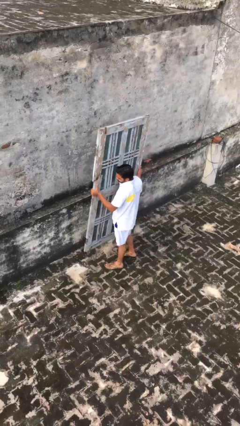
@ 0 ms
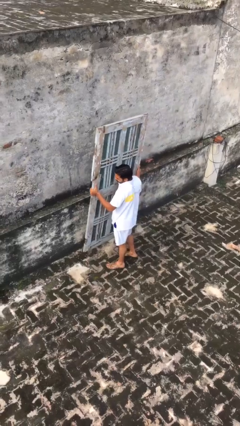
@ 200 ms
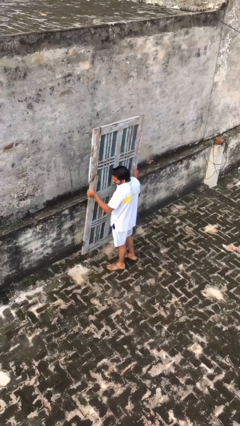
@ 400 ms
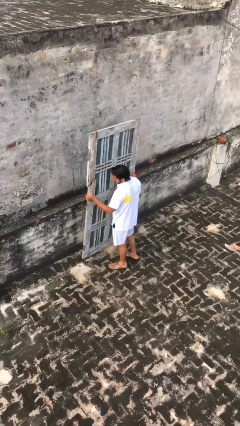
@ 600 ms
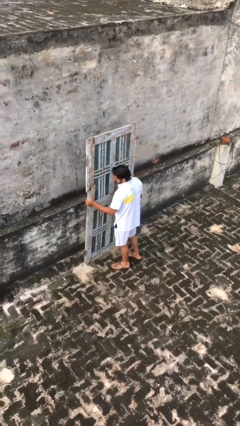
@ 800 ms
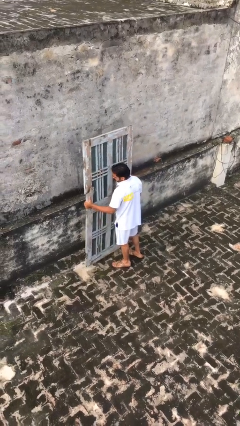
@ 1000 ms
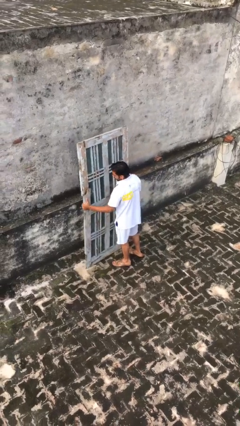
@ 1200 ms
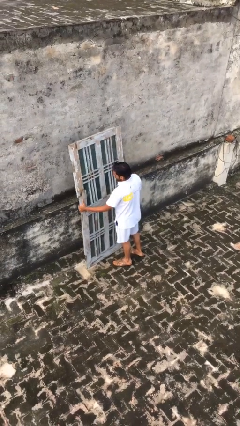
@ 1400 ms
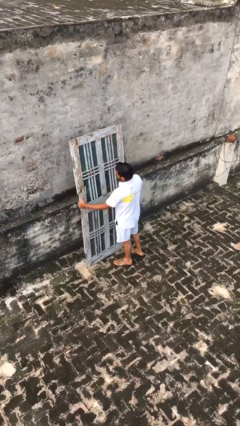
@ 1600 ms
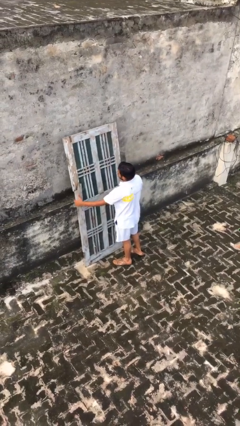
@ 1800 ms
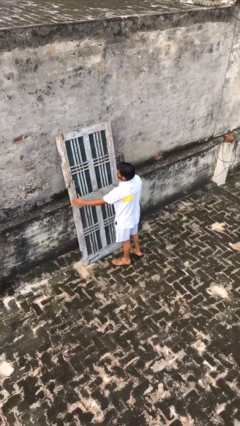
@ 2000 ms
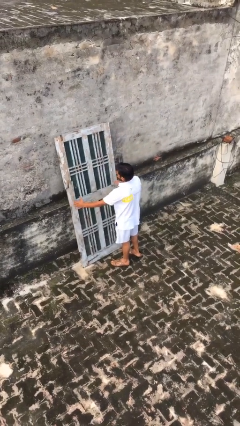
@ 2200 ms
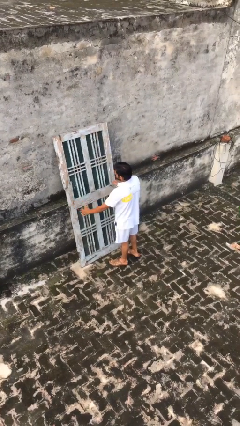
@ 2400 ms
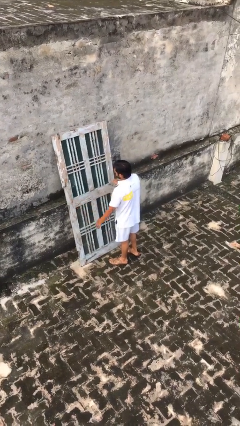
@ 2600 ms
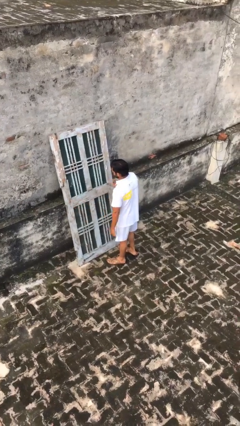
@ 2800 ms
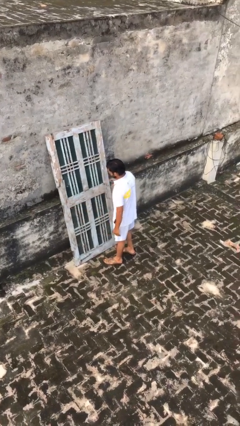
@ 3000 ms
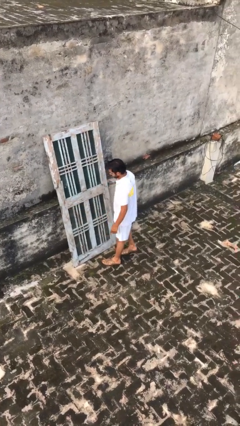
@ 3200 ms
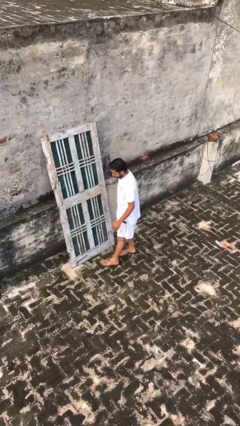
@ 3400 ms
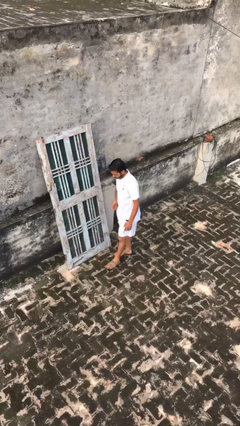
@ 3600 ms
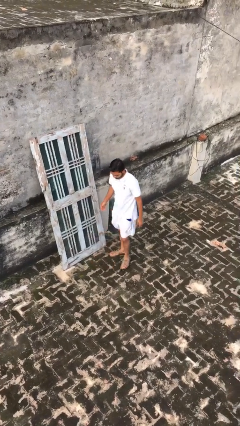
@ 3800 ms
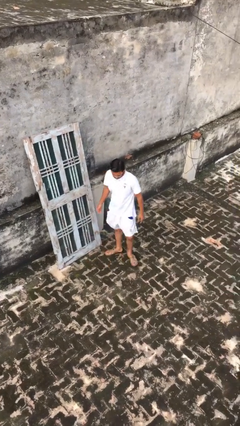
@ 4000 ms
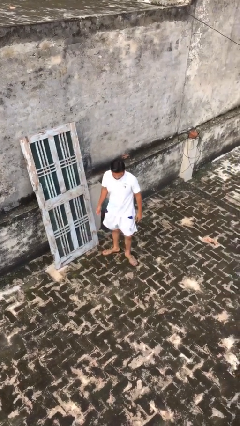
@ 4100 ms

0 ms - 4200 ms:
person puts down object on floor

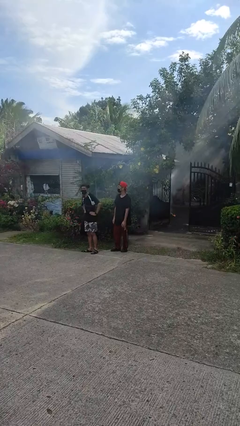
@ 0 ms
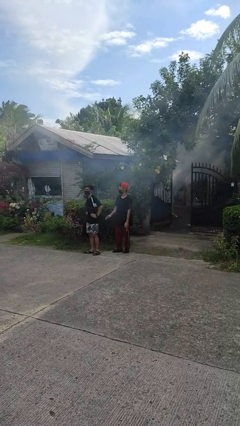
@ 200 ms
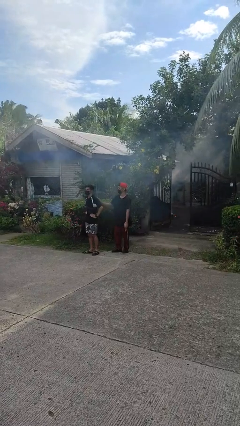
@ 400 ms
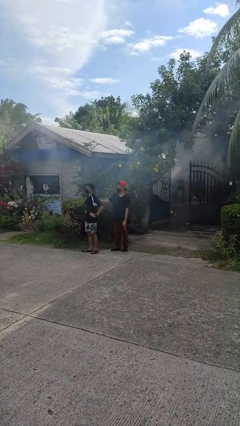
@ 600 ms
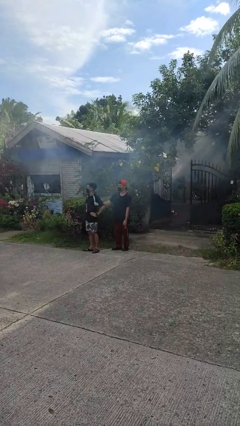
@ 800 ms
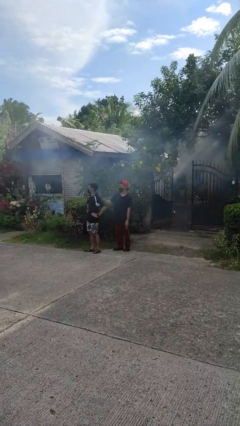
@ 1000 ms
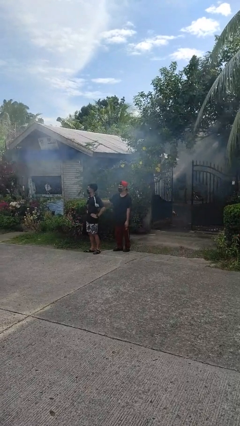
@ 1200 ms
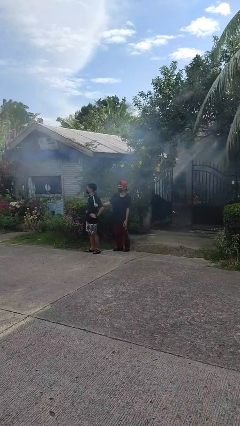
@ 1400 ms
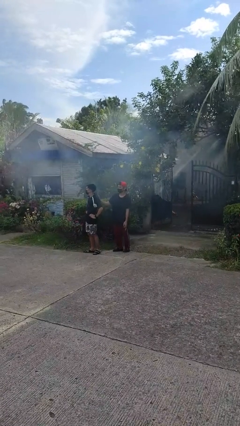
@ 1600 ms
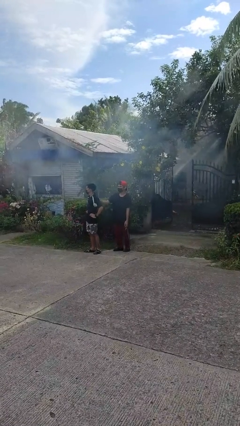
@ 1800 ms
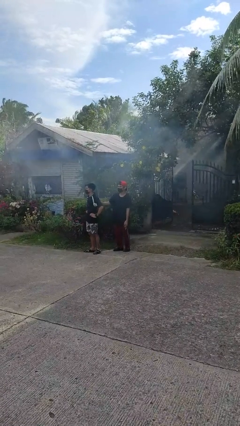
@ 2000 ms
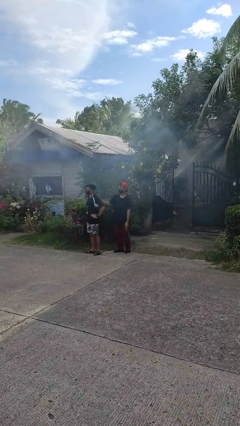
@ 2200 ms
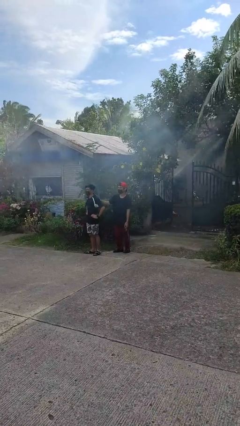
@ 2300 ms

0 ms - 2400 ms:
person touches back of person

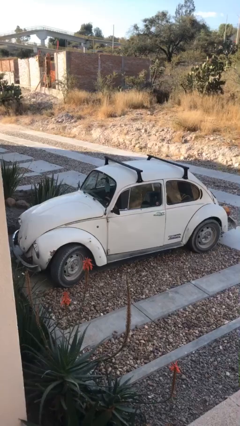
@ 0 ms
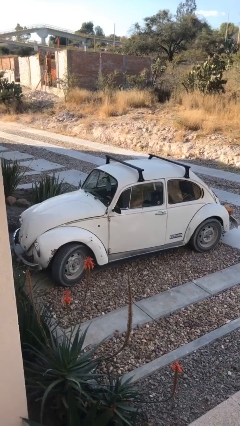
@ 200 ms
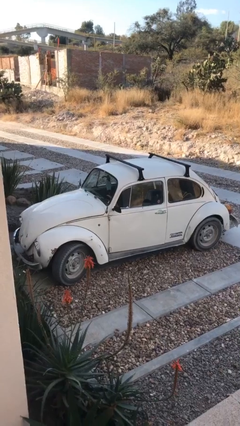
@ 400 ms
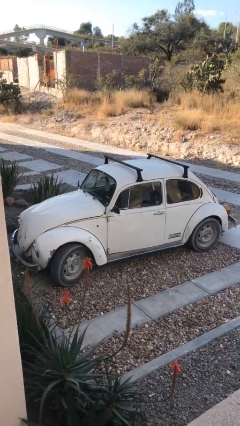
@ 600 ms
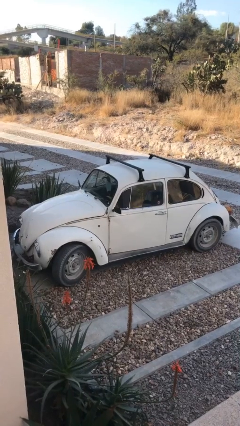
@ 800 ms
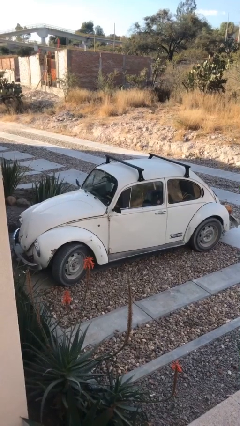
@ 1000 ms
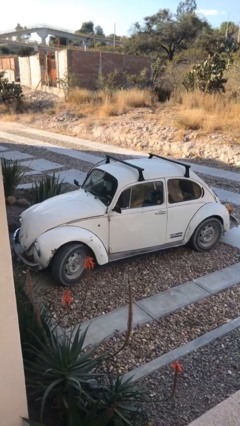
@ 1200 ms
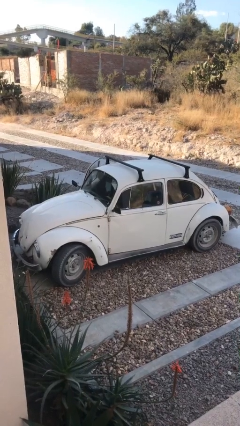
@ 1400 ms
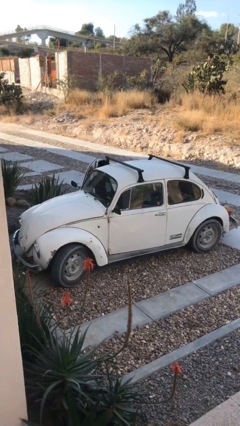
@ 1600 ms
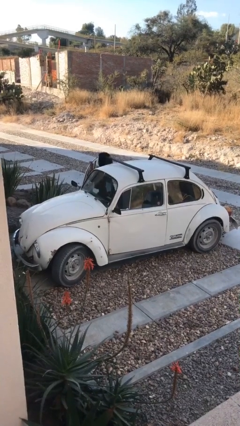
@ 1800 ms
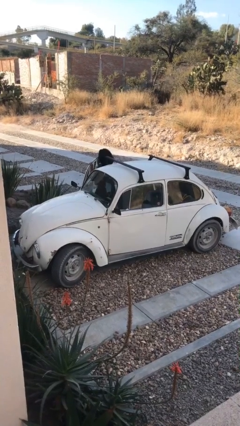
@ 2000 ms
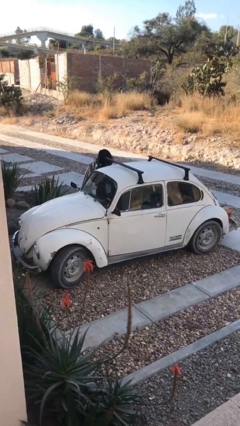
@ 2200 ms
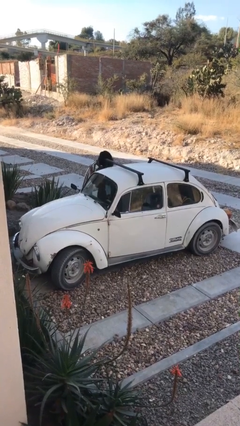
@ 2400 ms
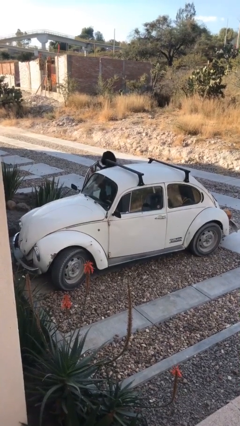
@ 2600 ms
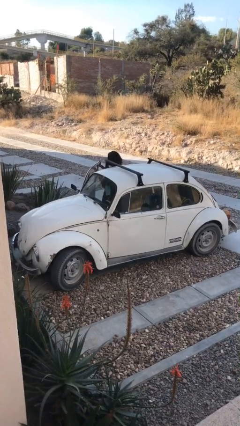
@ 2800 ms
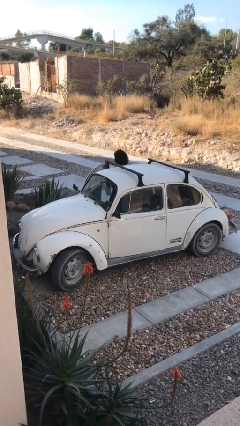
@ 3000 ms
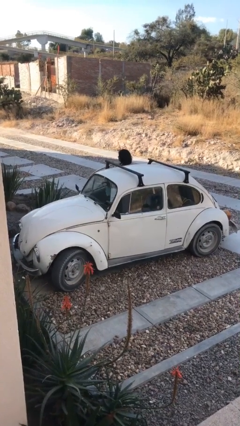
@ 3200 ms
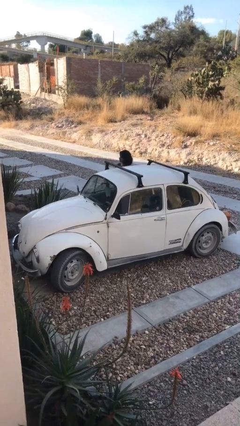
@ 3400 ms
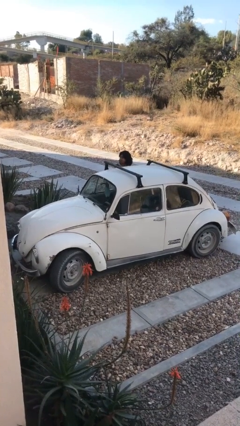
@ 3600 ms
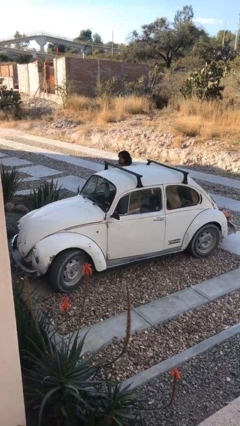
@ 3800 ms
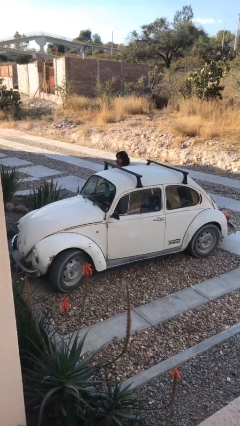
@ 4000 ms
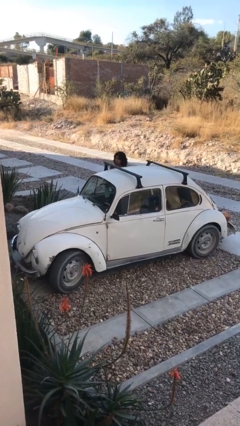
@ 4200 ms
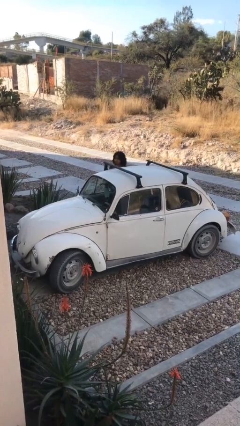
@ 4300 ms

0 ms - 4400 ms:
car drops off person

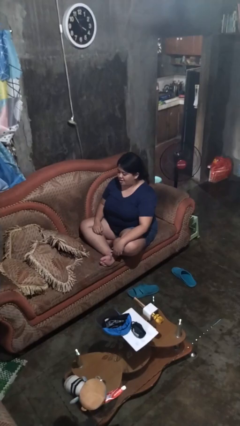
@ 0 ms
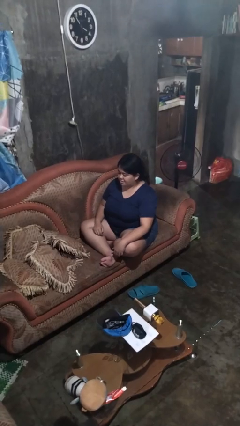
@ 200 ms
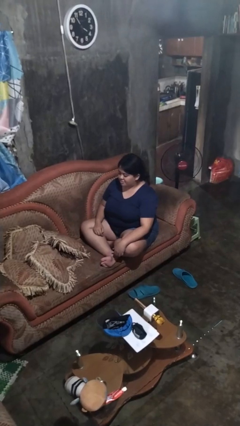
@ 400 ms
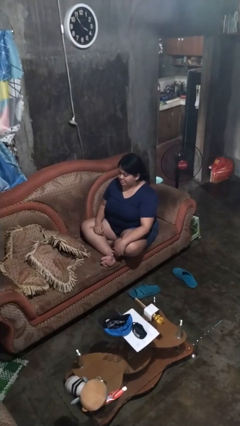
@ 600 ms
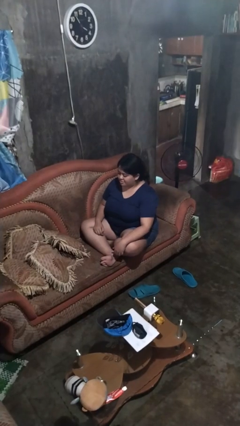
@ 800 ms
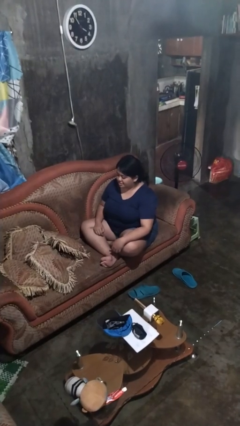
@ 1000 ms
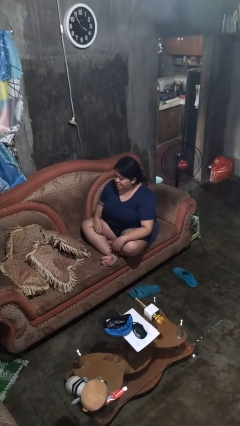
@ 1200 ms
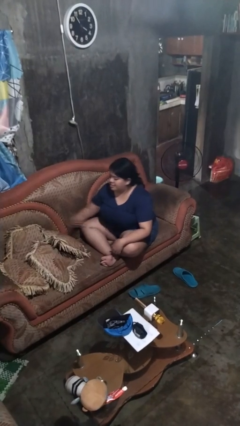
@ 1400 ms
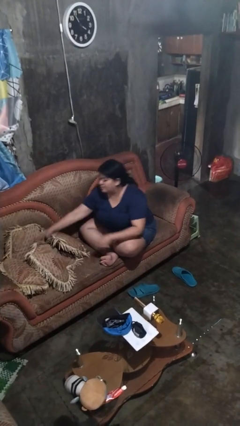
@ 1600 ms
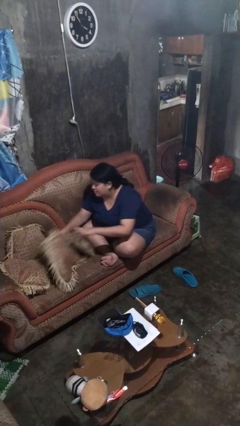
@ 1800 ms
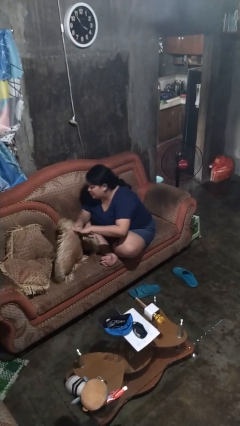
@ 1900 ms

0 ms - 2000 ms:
person searches in couch

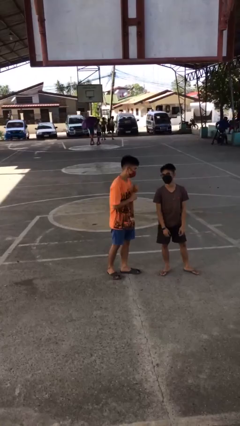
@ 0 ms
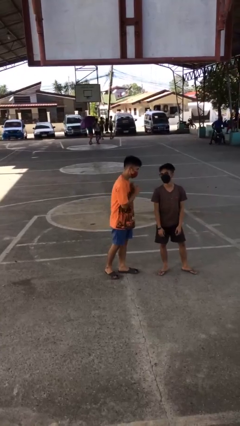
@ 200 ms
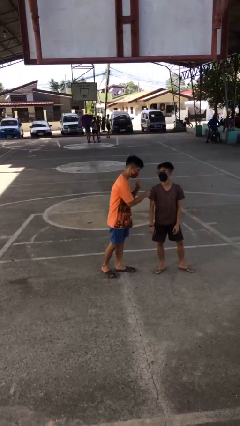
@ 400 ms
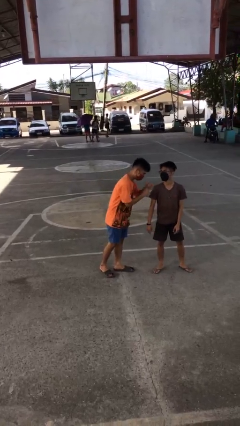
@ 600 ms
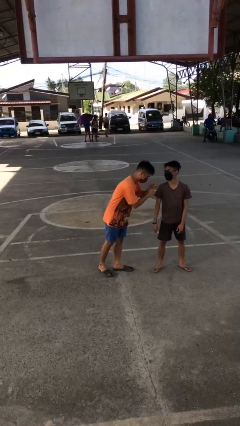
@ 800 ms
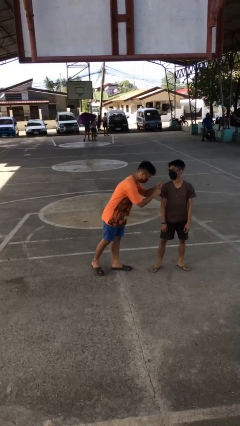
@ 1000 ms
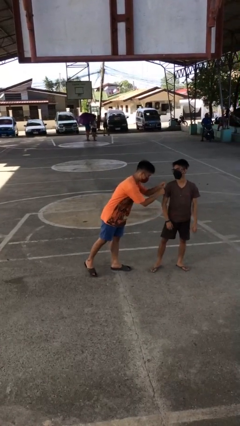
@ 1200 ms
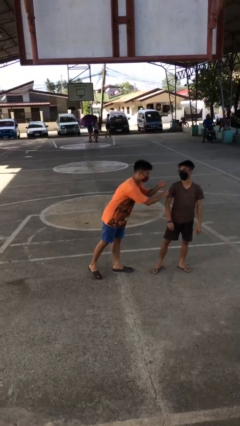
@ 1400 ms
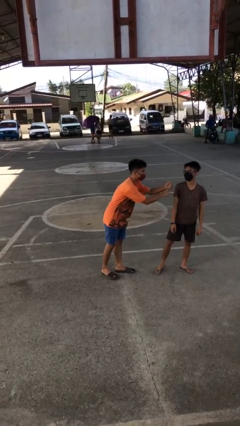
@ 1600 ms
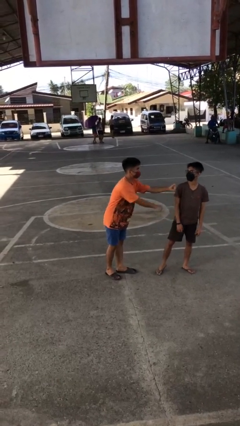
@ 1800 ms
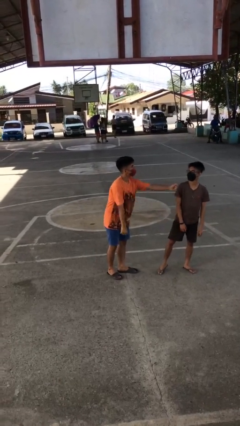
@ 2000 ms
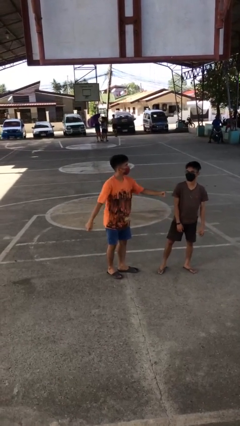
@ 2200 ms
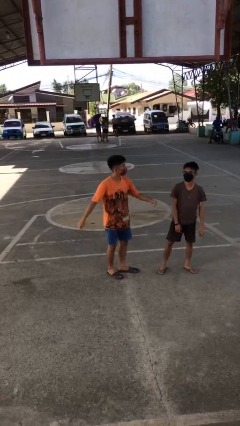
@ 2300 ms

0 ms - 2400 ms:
person pounds shoulders of person

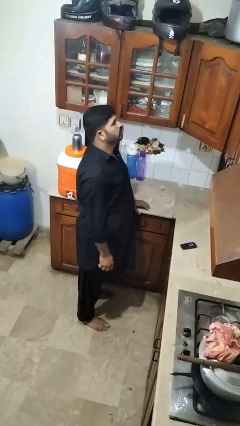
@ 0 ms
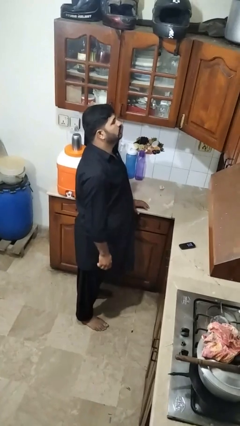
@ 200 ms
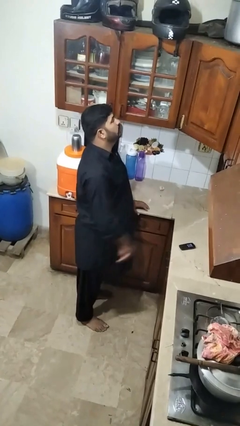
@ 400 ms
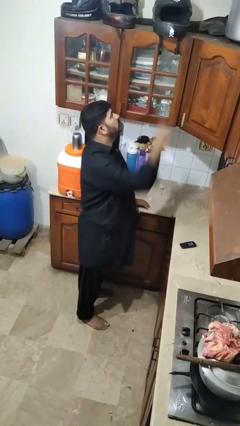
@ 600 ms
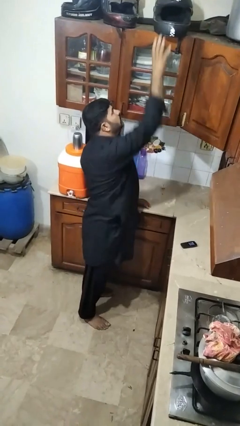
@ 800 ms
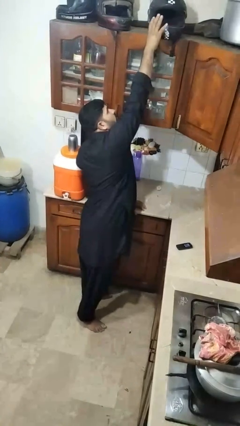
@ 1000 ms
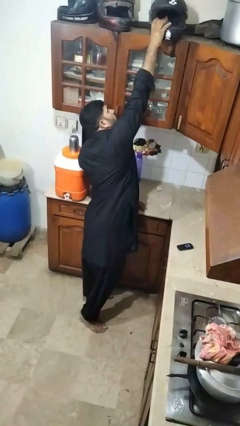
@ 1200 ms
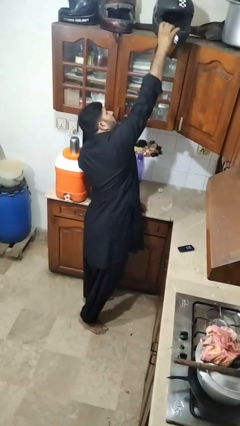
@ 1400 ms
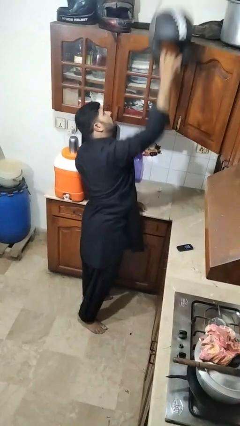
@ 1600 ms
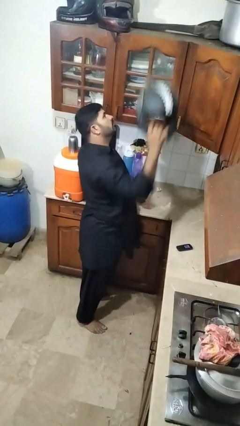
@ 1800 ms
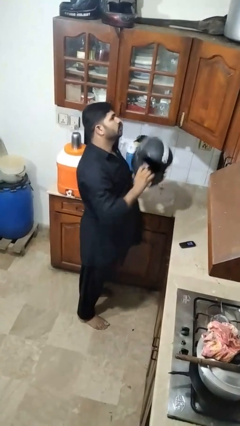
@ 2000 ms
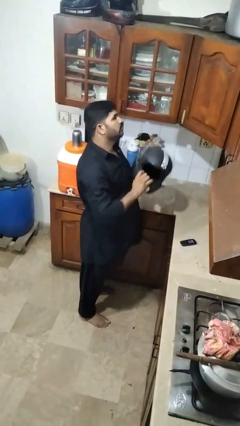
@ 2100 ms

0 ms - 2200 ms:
person picks up object from shelf
